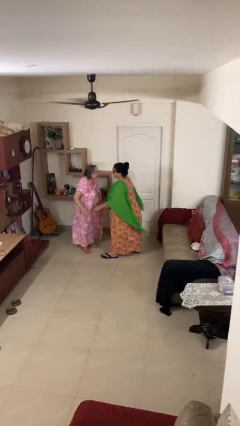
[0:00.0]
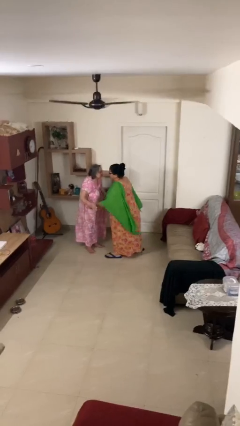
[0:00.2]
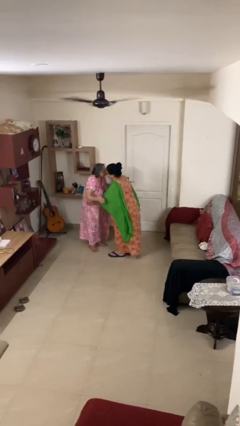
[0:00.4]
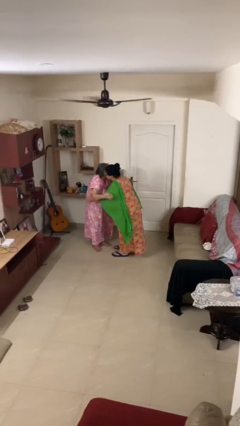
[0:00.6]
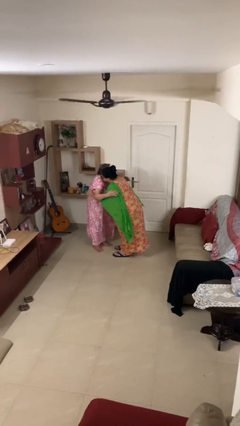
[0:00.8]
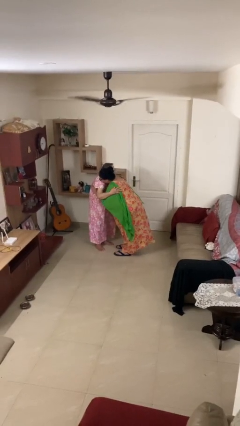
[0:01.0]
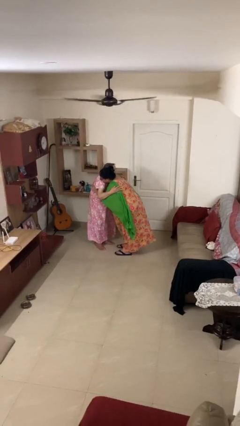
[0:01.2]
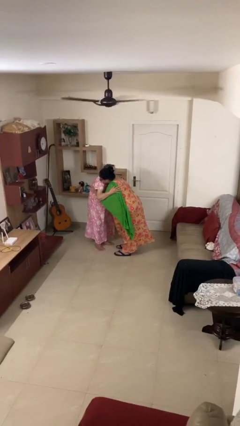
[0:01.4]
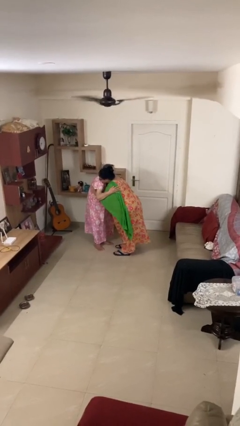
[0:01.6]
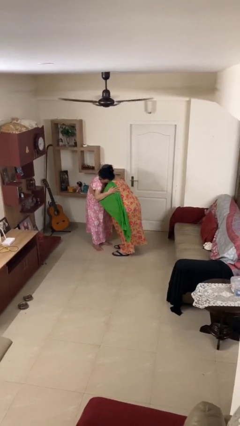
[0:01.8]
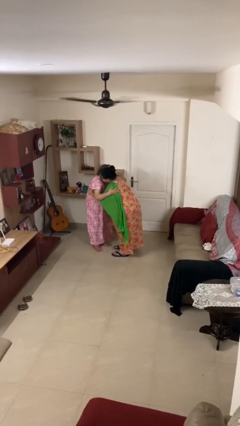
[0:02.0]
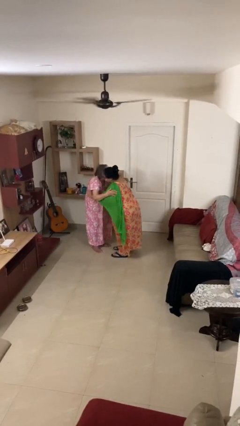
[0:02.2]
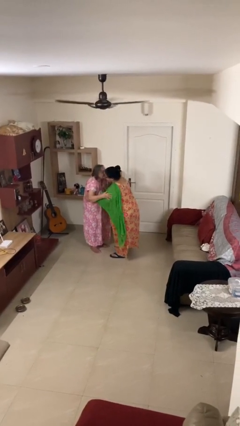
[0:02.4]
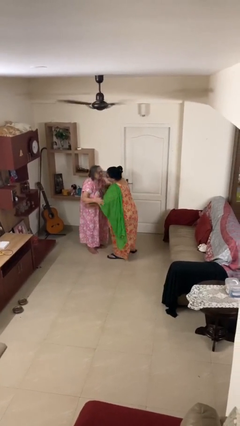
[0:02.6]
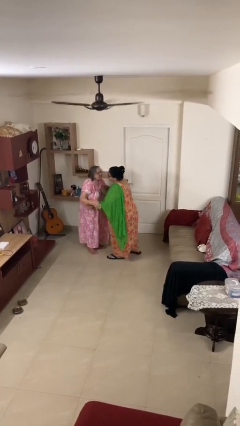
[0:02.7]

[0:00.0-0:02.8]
person embraces person

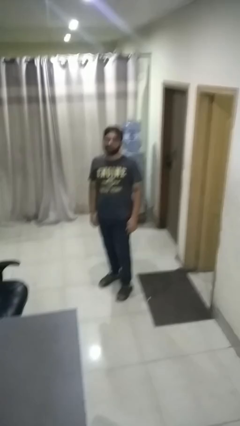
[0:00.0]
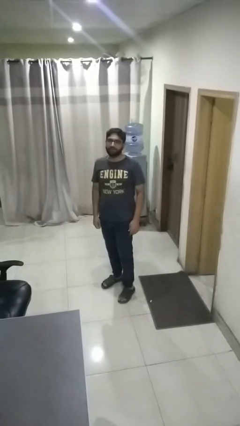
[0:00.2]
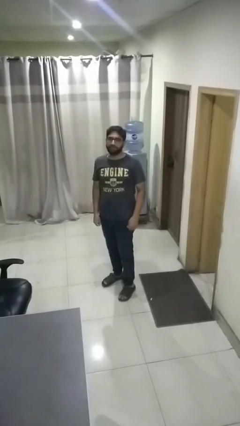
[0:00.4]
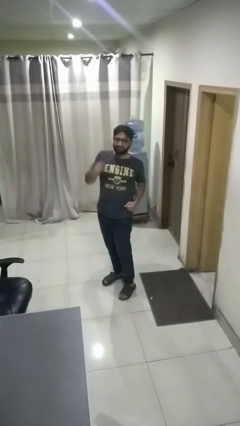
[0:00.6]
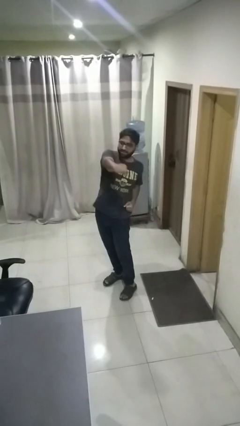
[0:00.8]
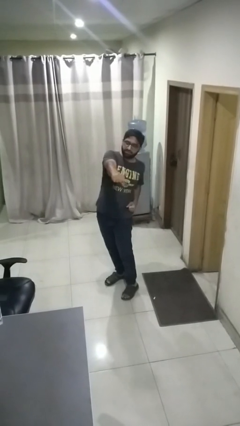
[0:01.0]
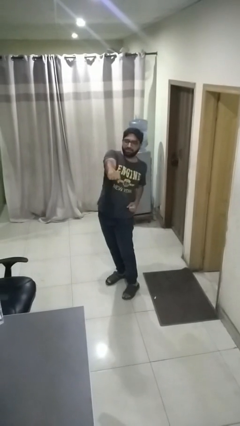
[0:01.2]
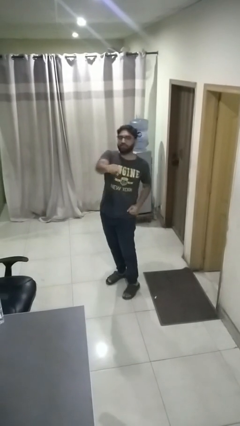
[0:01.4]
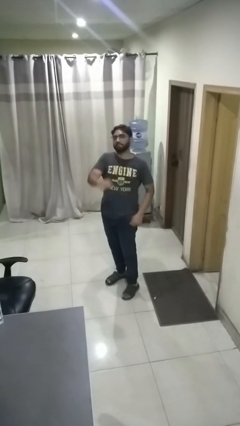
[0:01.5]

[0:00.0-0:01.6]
person punches

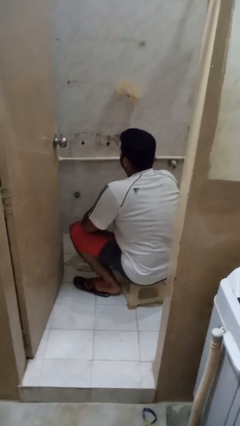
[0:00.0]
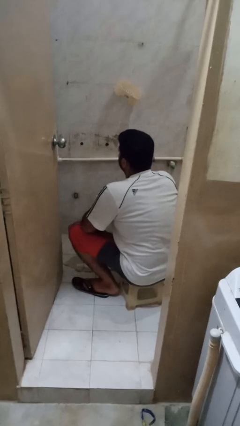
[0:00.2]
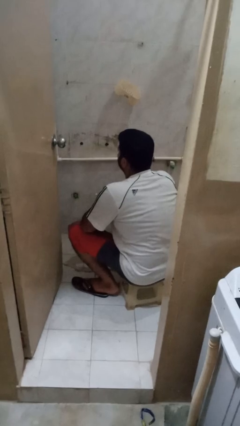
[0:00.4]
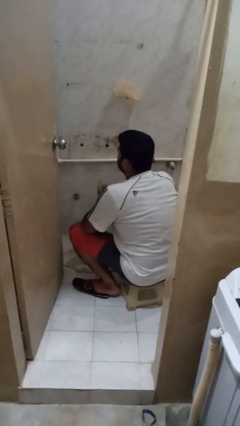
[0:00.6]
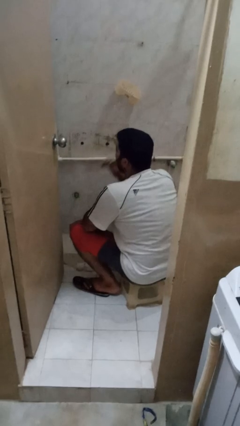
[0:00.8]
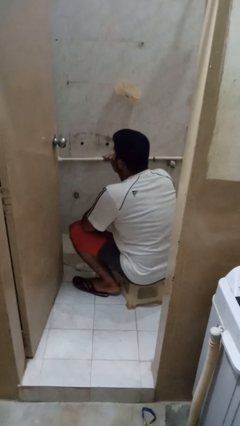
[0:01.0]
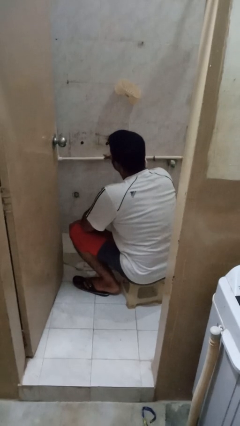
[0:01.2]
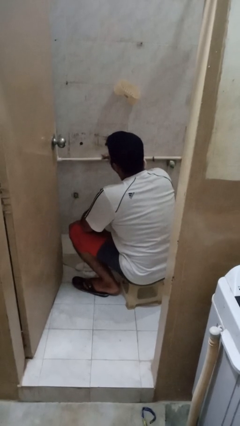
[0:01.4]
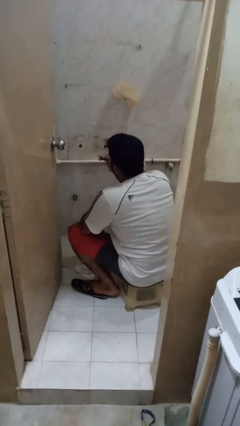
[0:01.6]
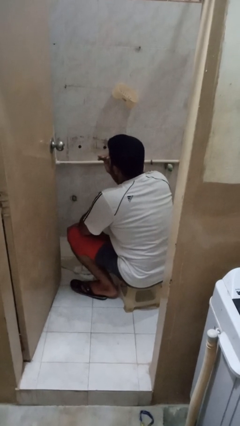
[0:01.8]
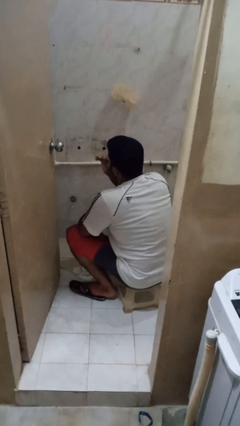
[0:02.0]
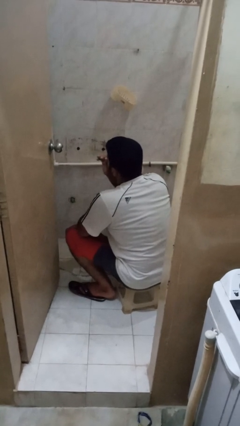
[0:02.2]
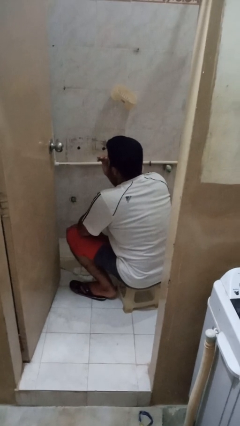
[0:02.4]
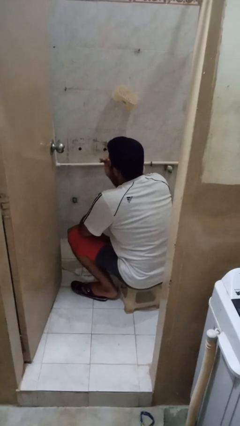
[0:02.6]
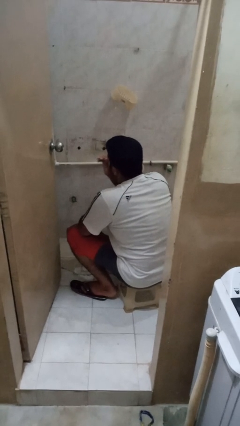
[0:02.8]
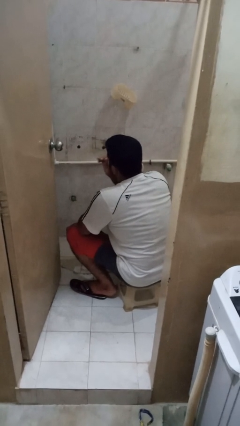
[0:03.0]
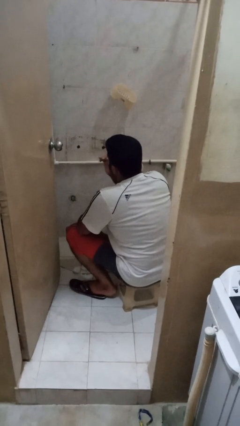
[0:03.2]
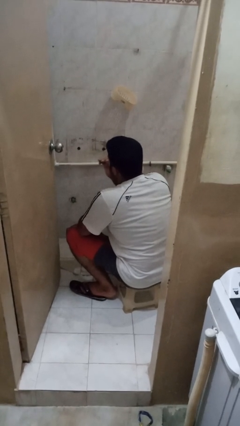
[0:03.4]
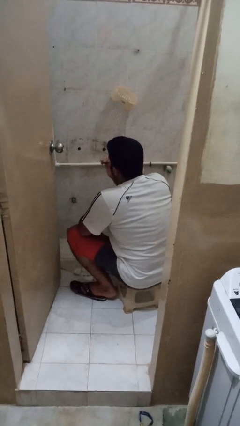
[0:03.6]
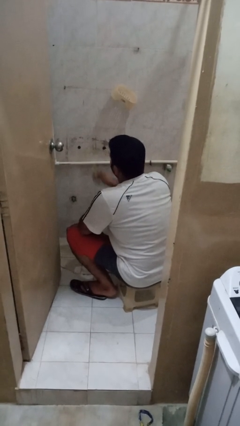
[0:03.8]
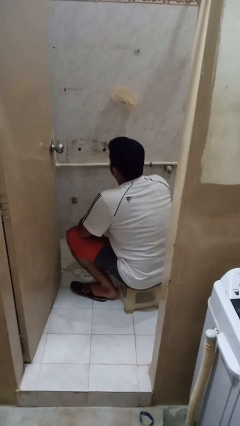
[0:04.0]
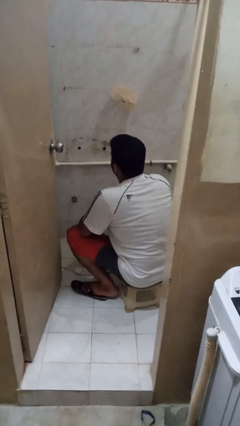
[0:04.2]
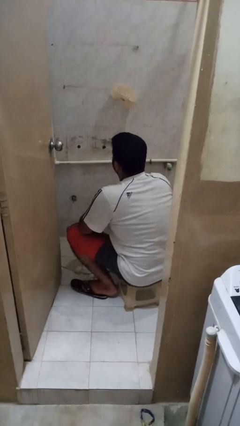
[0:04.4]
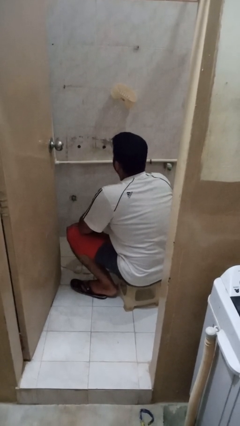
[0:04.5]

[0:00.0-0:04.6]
person brushes teeth

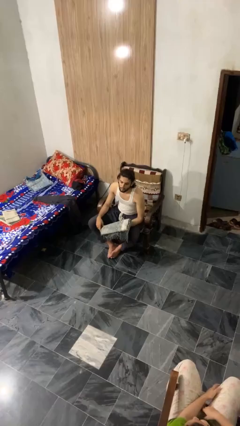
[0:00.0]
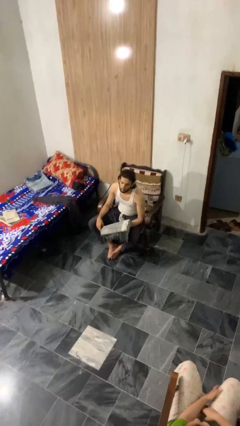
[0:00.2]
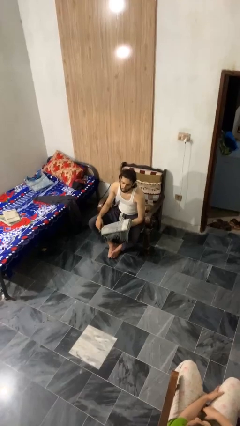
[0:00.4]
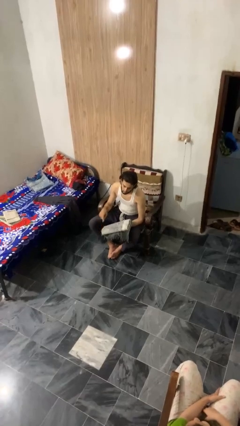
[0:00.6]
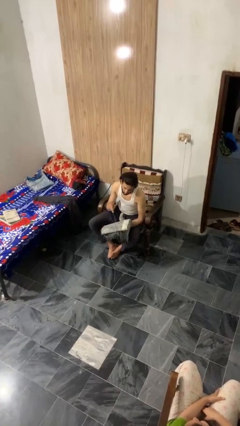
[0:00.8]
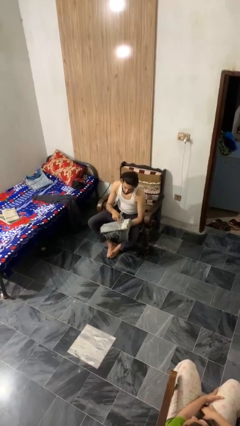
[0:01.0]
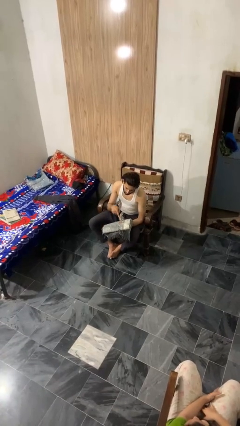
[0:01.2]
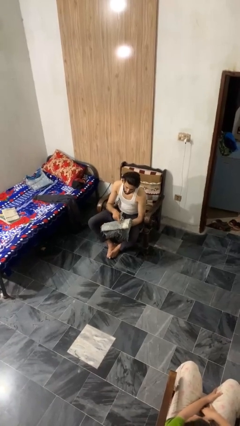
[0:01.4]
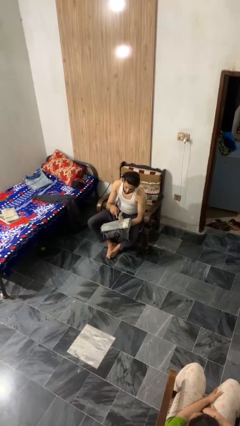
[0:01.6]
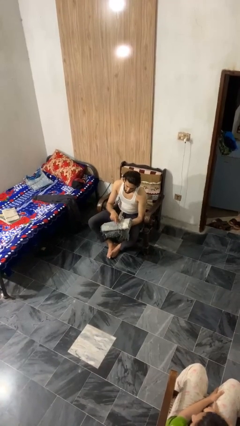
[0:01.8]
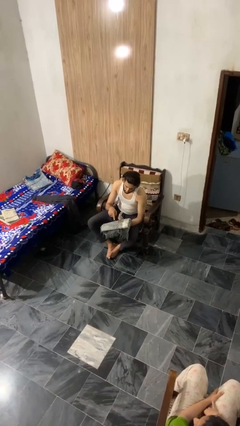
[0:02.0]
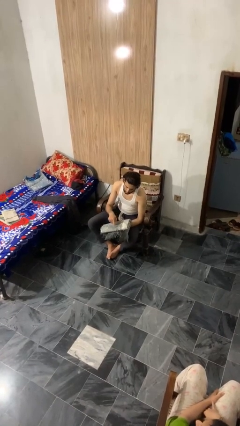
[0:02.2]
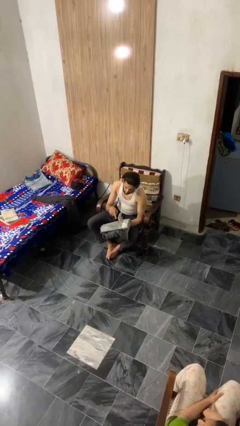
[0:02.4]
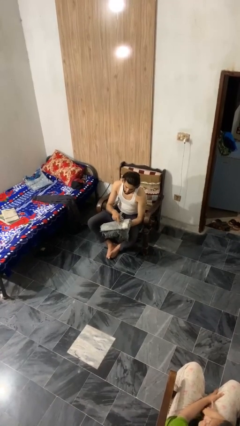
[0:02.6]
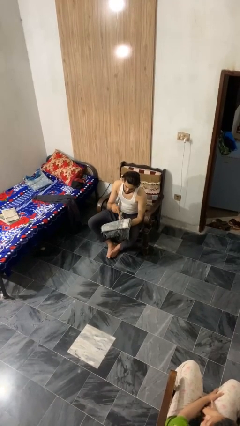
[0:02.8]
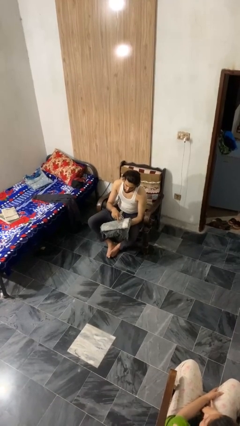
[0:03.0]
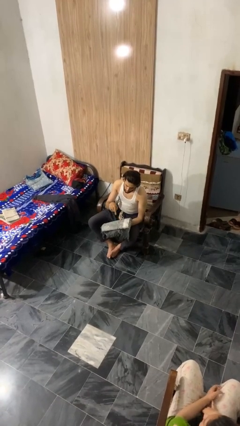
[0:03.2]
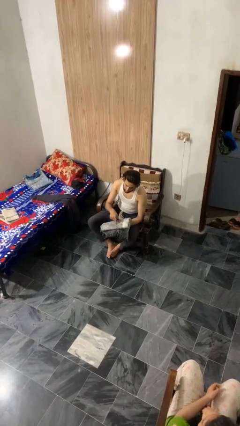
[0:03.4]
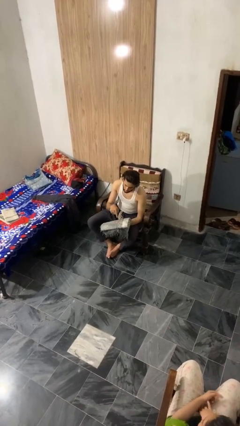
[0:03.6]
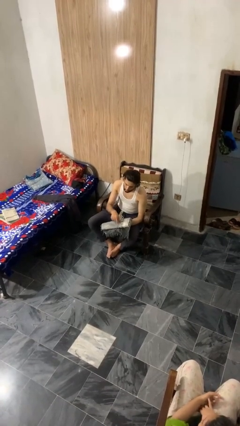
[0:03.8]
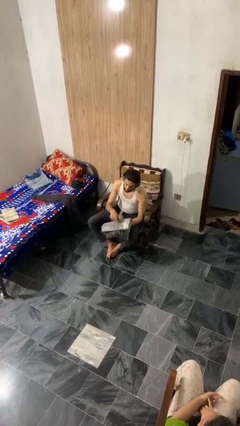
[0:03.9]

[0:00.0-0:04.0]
person taps object with finger

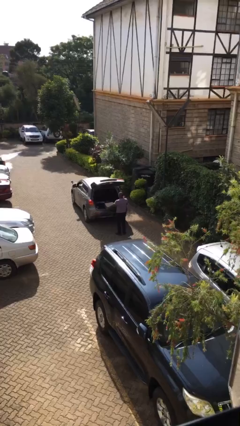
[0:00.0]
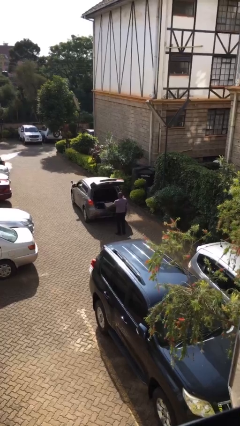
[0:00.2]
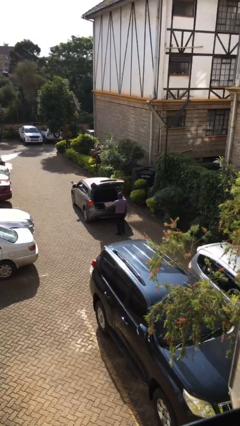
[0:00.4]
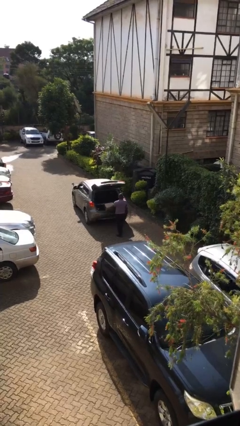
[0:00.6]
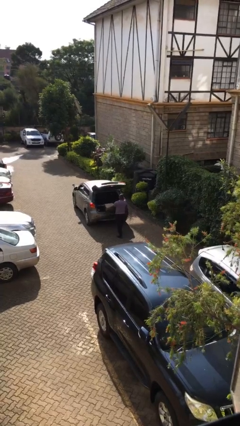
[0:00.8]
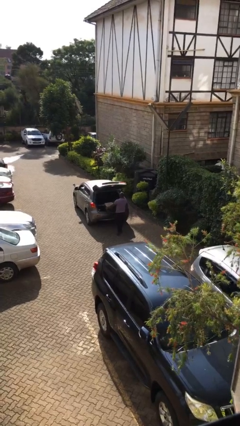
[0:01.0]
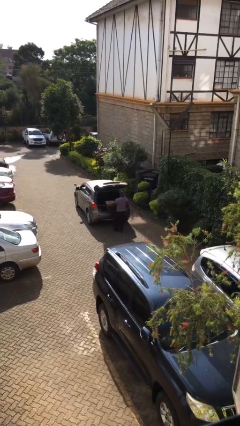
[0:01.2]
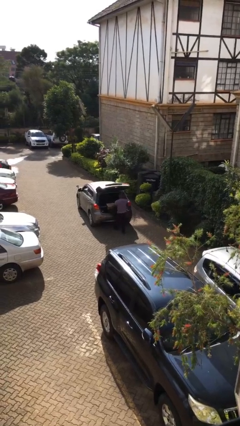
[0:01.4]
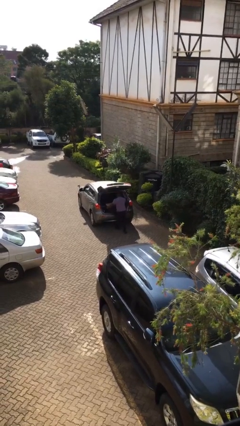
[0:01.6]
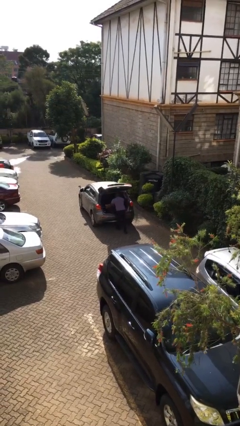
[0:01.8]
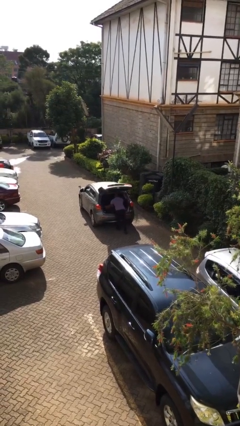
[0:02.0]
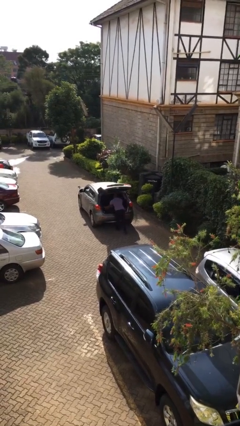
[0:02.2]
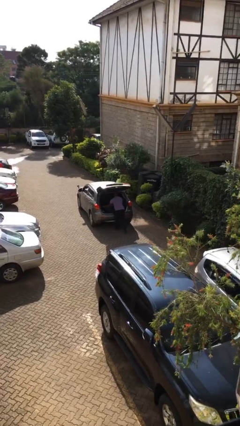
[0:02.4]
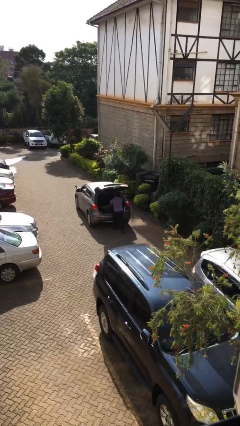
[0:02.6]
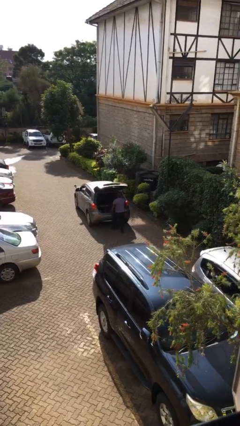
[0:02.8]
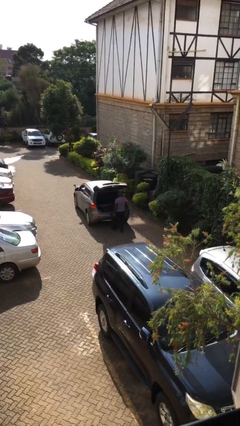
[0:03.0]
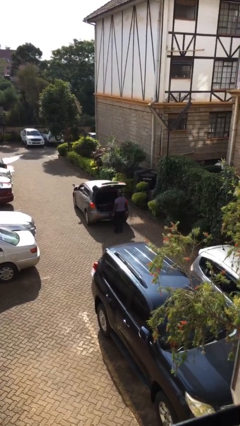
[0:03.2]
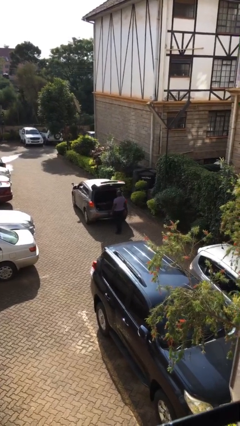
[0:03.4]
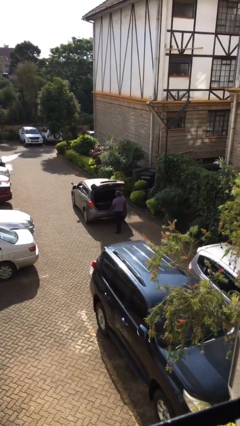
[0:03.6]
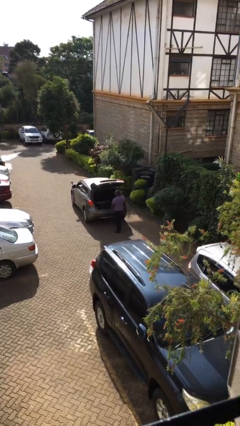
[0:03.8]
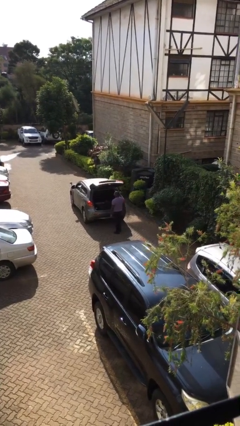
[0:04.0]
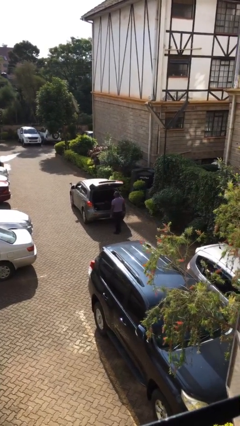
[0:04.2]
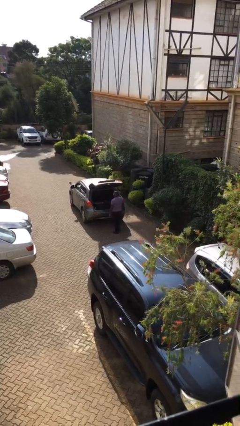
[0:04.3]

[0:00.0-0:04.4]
person loads car

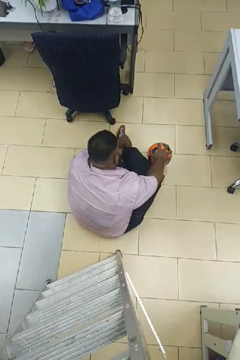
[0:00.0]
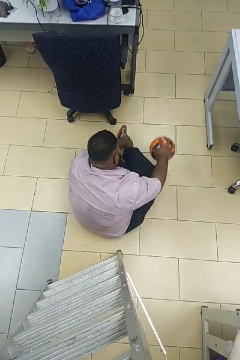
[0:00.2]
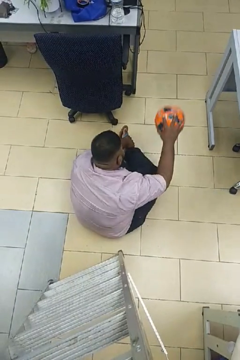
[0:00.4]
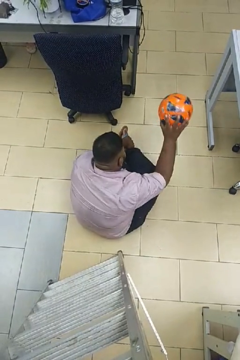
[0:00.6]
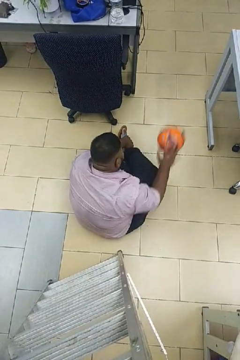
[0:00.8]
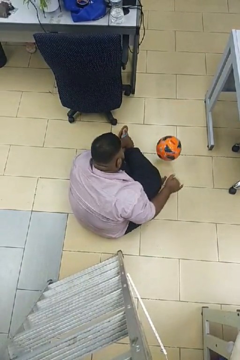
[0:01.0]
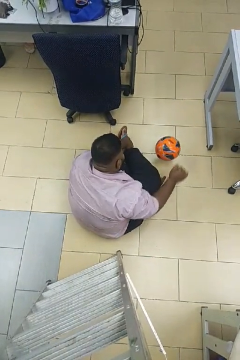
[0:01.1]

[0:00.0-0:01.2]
person bounces ball on floor
